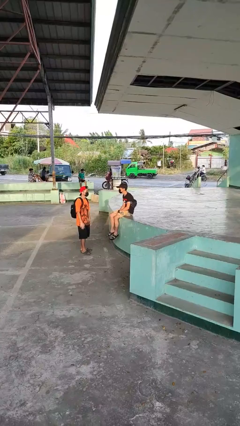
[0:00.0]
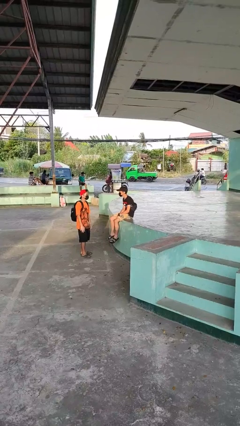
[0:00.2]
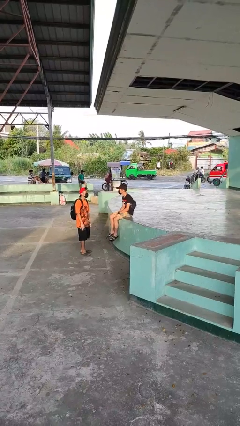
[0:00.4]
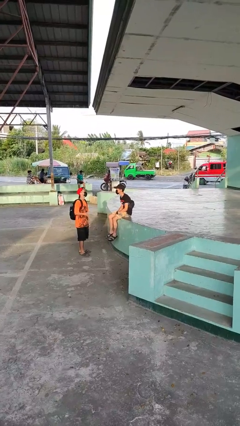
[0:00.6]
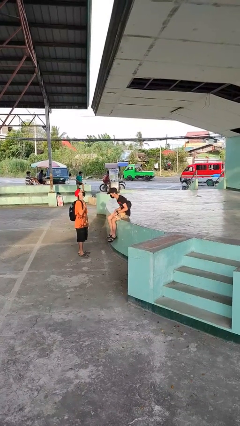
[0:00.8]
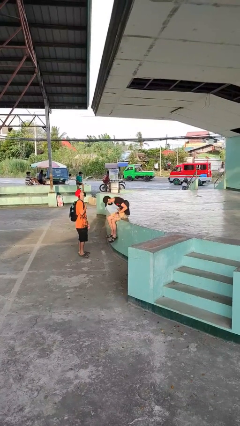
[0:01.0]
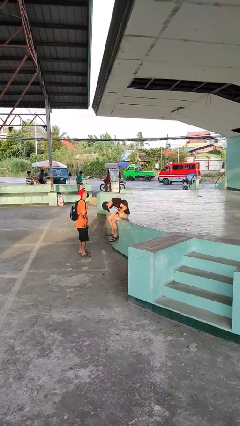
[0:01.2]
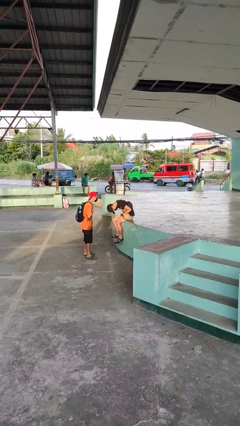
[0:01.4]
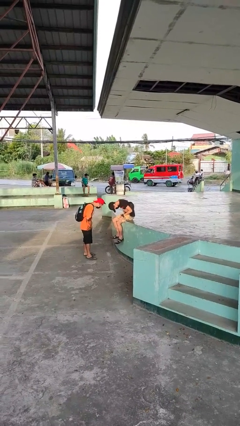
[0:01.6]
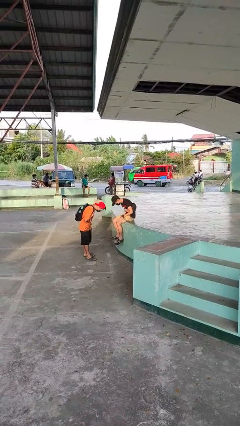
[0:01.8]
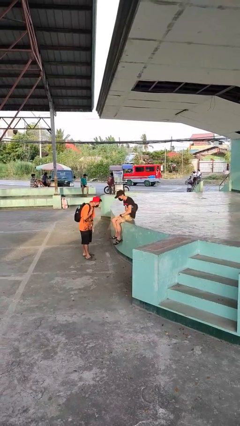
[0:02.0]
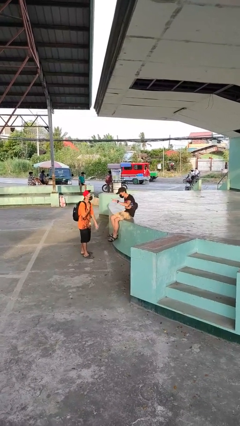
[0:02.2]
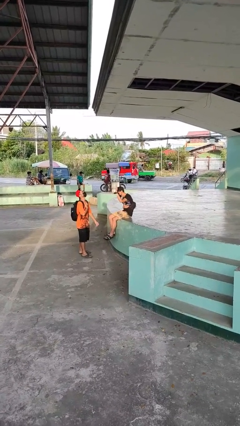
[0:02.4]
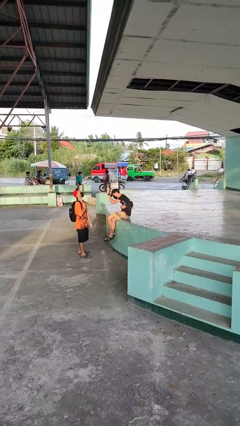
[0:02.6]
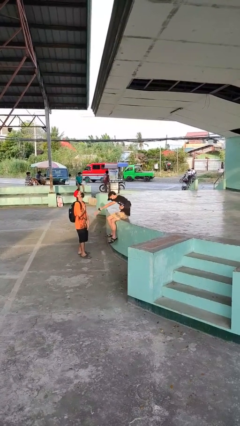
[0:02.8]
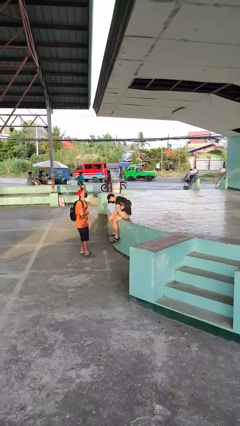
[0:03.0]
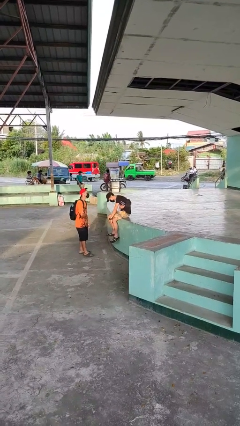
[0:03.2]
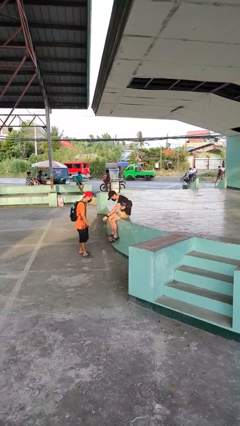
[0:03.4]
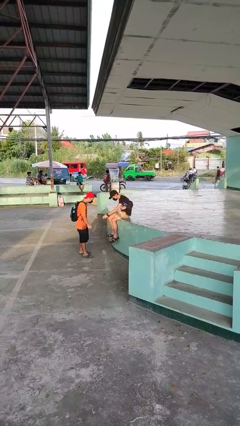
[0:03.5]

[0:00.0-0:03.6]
person laughs with person

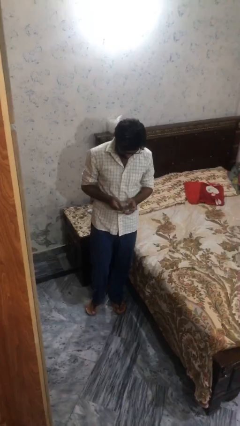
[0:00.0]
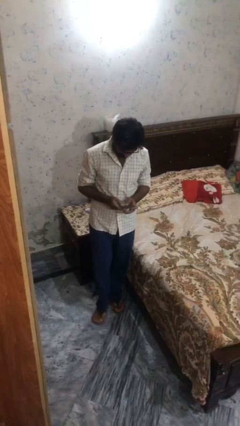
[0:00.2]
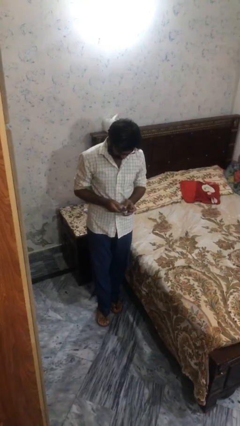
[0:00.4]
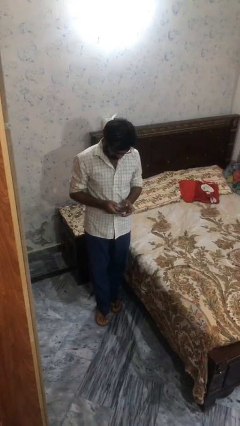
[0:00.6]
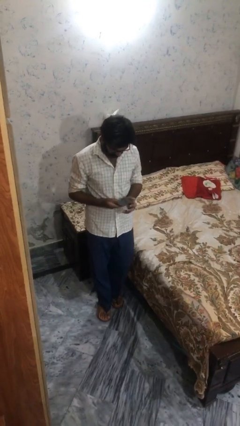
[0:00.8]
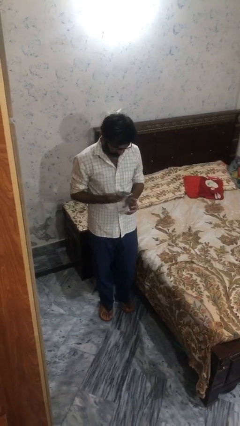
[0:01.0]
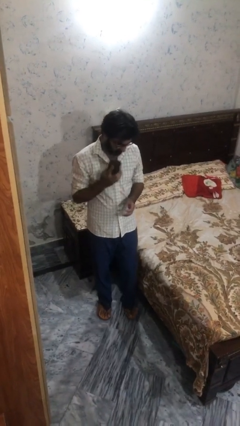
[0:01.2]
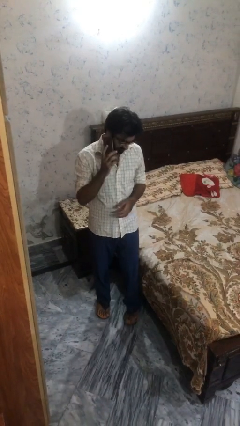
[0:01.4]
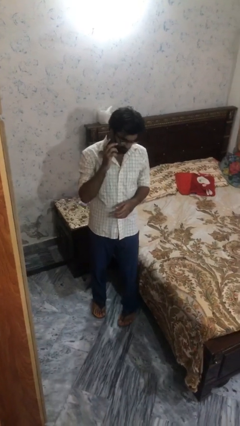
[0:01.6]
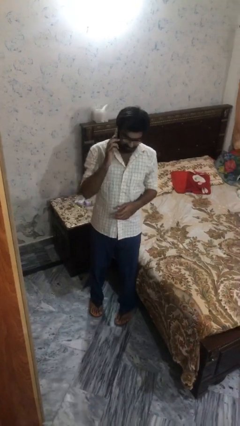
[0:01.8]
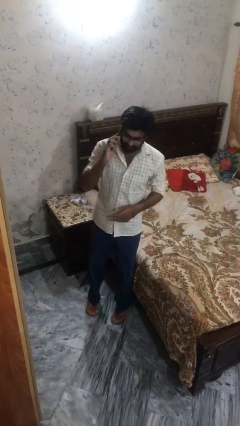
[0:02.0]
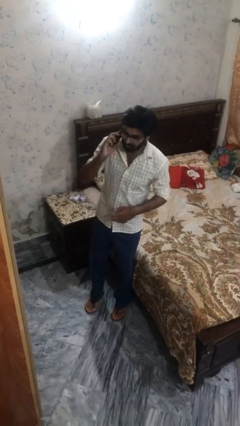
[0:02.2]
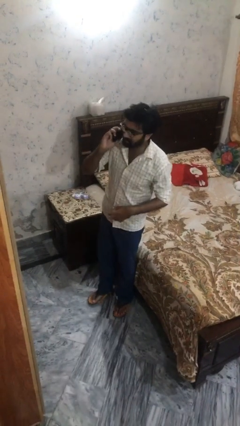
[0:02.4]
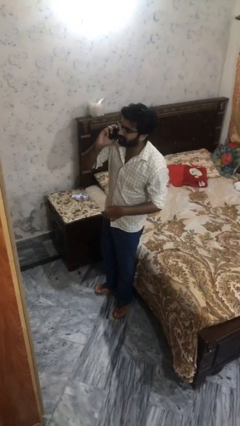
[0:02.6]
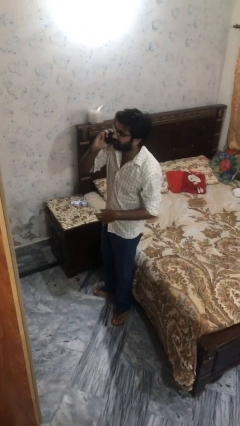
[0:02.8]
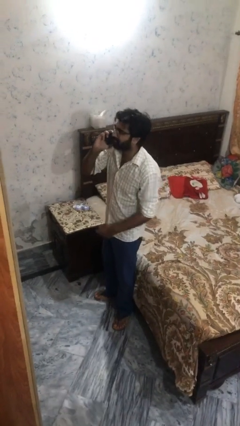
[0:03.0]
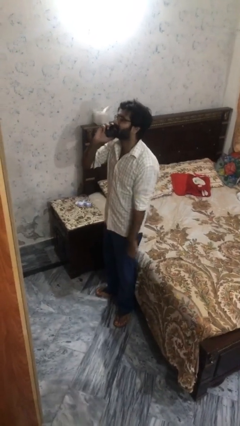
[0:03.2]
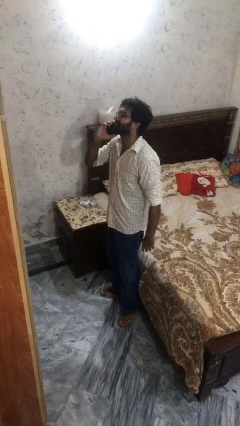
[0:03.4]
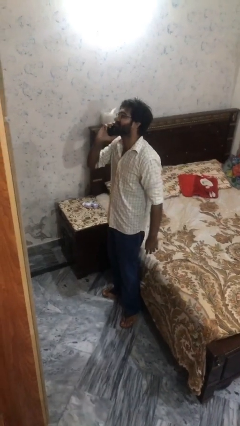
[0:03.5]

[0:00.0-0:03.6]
person talks on phone

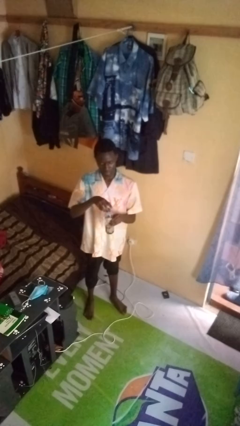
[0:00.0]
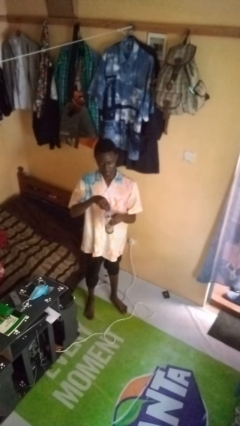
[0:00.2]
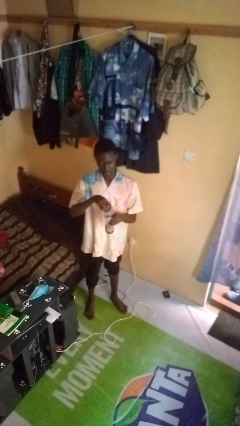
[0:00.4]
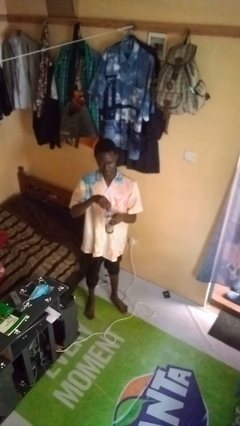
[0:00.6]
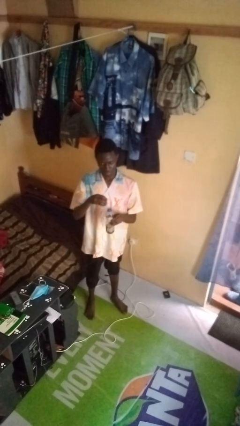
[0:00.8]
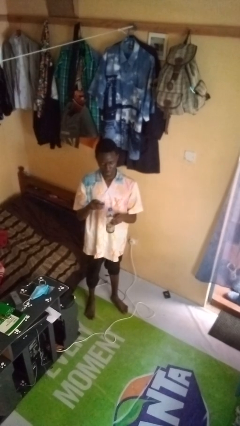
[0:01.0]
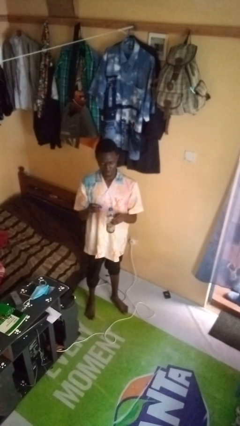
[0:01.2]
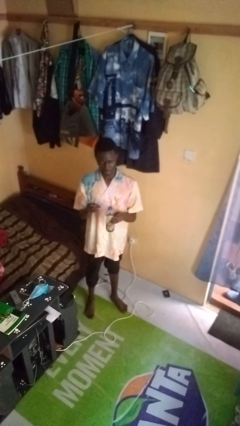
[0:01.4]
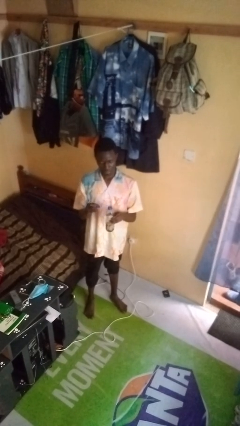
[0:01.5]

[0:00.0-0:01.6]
person unscrews lid from bottle

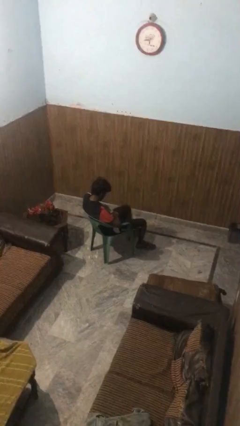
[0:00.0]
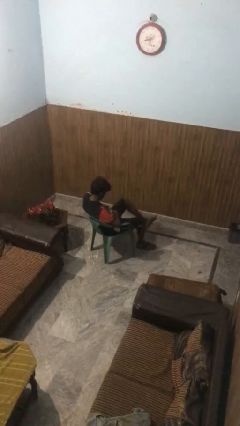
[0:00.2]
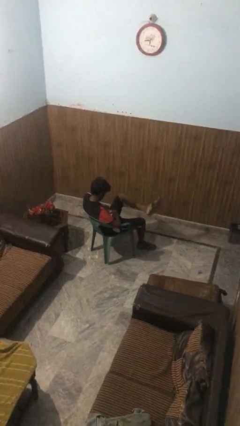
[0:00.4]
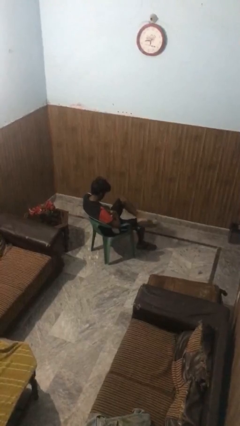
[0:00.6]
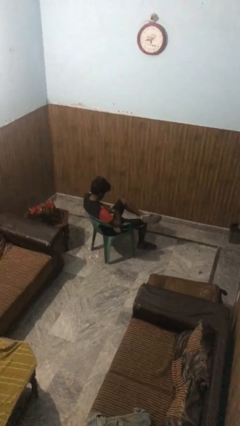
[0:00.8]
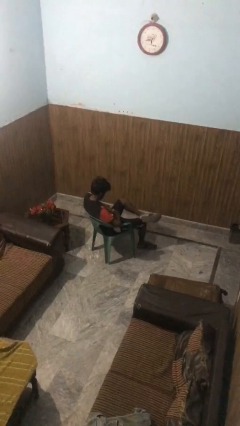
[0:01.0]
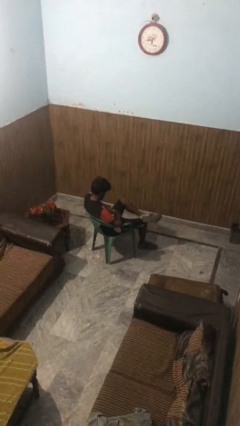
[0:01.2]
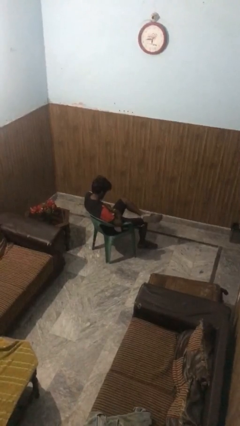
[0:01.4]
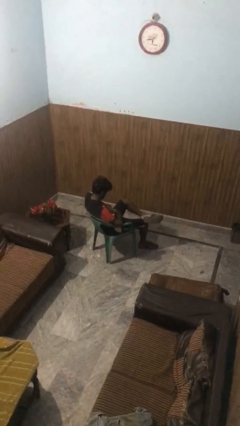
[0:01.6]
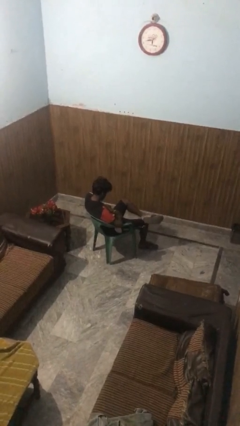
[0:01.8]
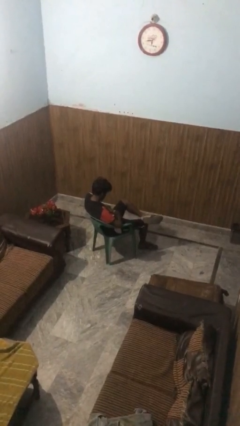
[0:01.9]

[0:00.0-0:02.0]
person crosses legs

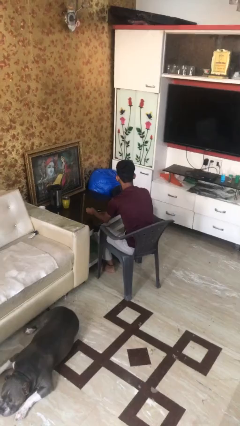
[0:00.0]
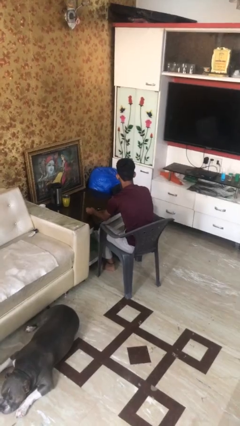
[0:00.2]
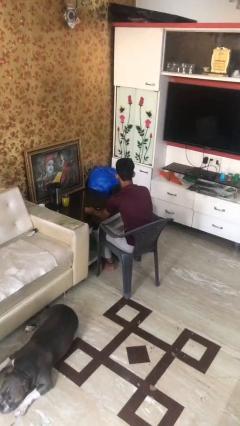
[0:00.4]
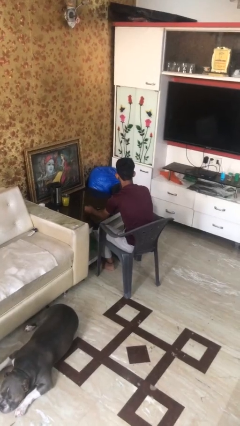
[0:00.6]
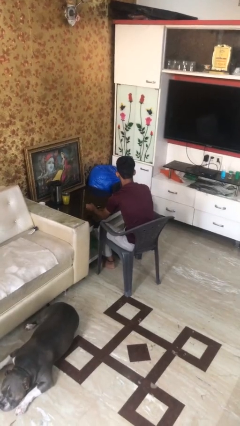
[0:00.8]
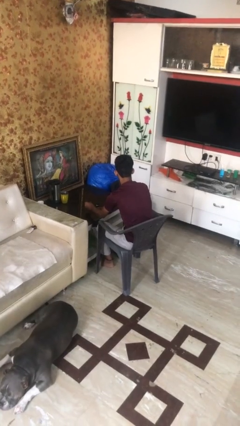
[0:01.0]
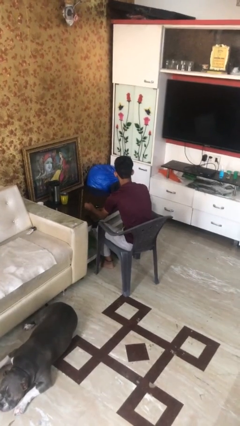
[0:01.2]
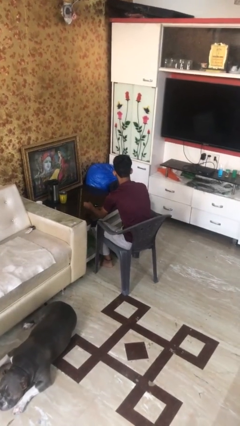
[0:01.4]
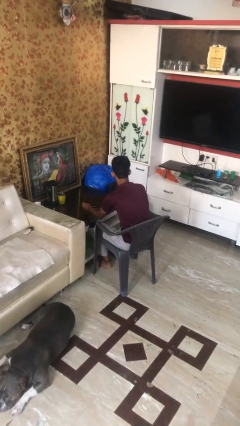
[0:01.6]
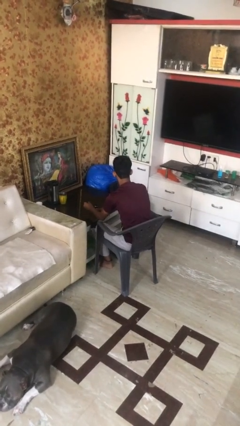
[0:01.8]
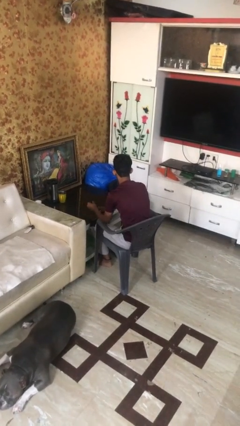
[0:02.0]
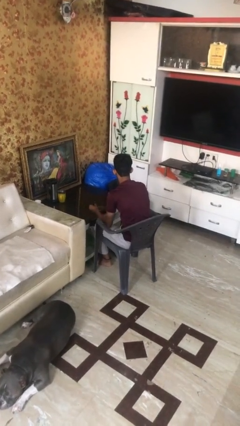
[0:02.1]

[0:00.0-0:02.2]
person paints fingernails

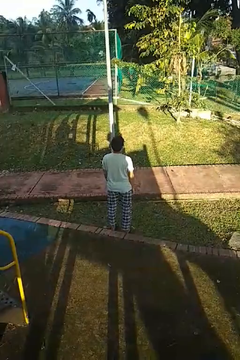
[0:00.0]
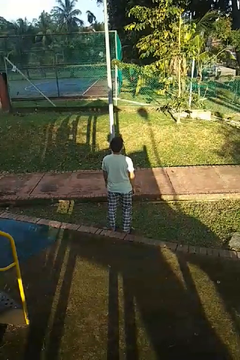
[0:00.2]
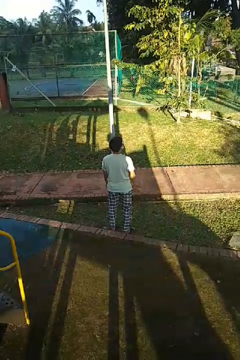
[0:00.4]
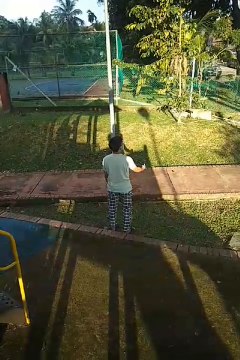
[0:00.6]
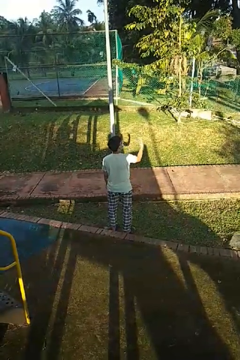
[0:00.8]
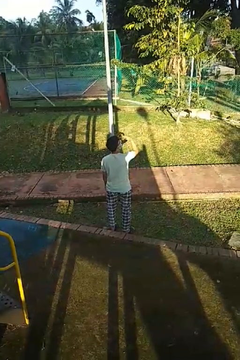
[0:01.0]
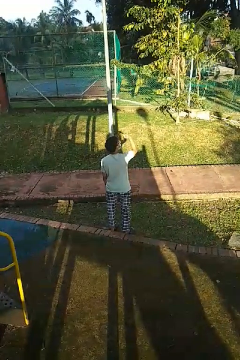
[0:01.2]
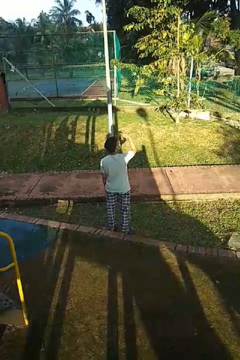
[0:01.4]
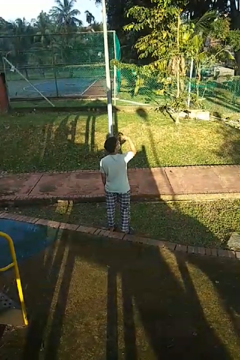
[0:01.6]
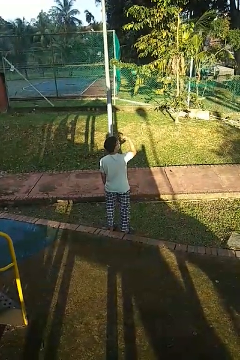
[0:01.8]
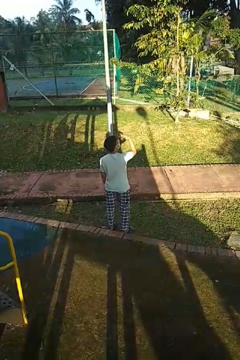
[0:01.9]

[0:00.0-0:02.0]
person gestures watch closely

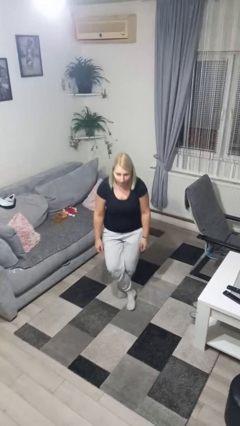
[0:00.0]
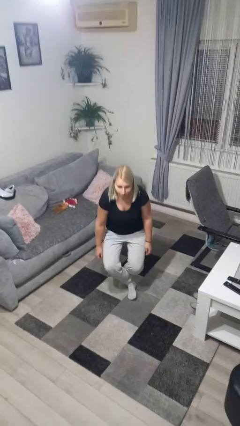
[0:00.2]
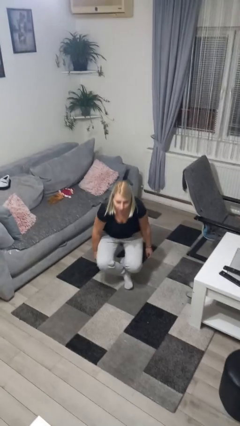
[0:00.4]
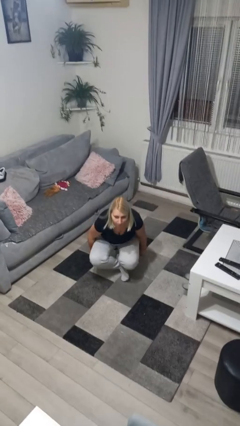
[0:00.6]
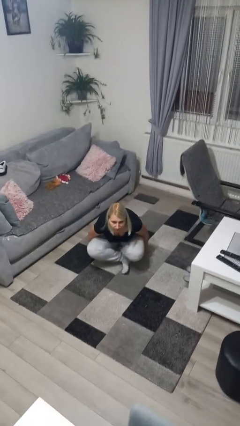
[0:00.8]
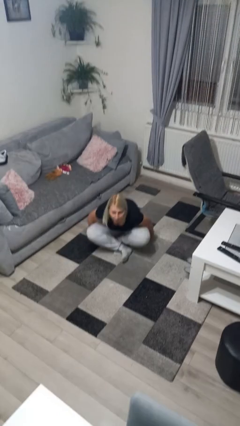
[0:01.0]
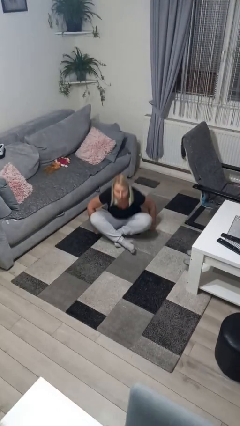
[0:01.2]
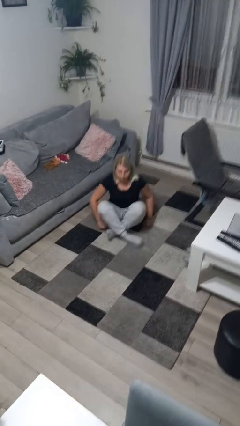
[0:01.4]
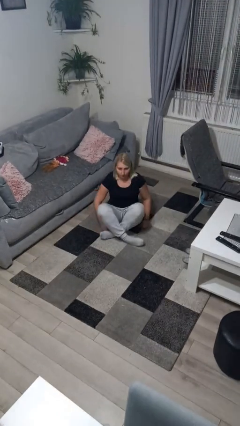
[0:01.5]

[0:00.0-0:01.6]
person sits crisscross

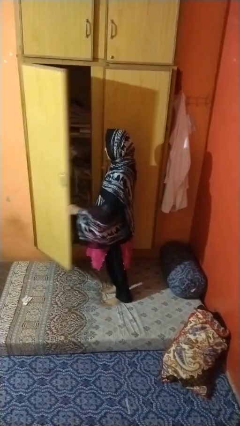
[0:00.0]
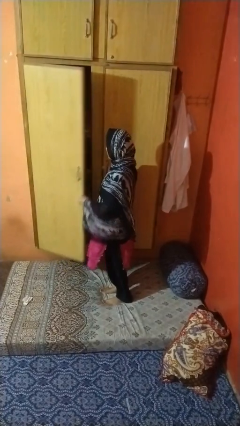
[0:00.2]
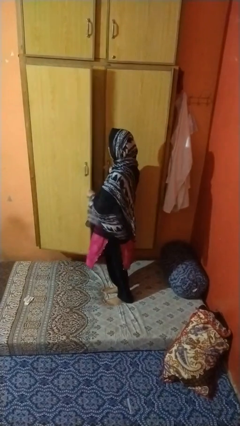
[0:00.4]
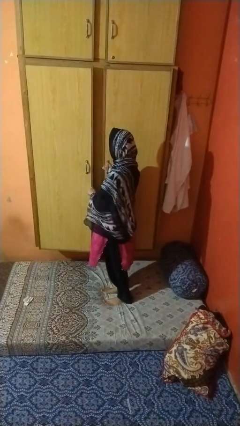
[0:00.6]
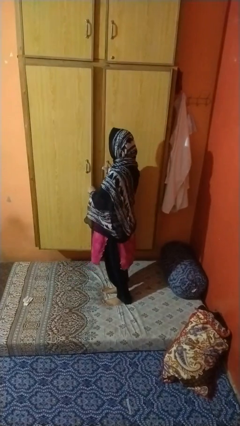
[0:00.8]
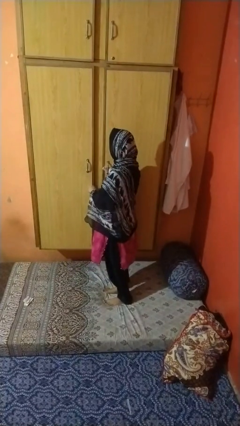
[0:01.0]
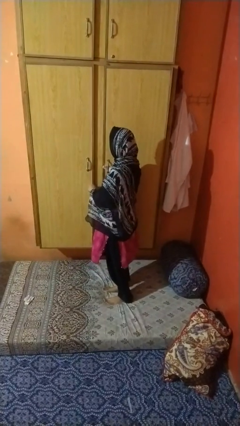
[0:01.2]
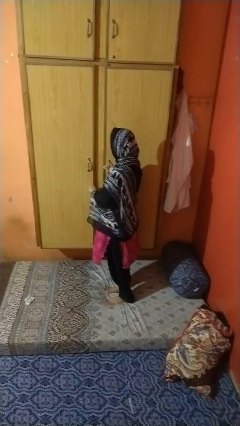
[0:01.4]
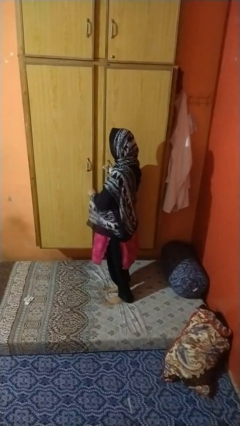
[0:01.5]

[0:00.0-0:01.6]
person closes closet door
